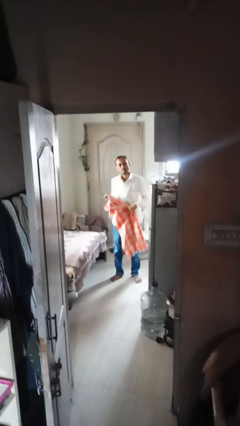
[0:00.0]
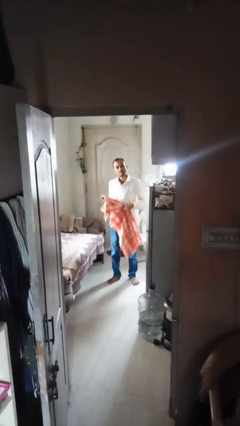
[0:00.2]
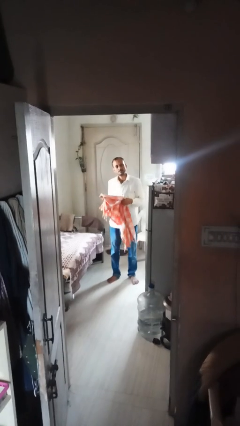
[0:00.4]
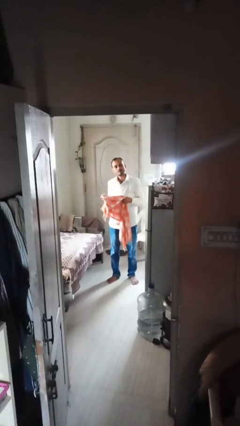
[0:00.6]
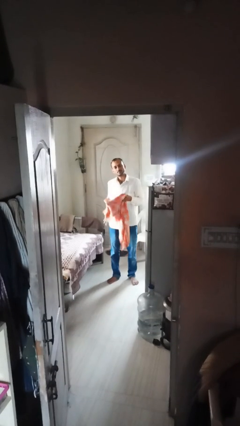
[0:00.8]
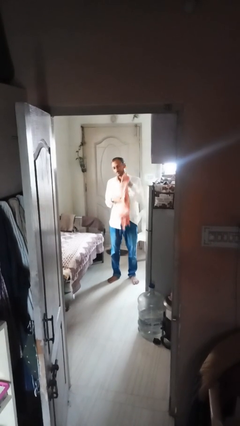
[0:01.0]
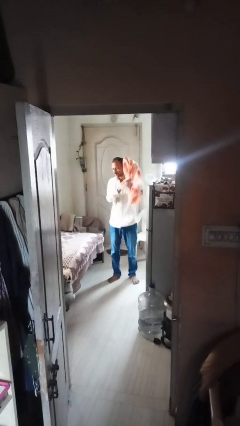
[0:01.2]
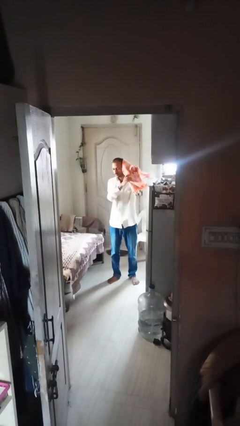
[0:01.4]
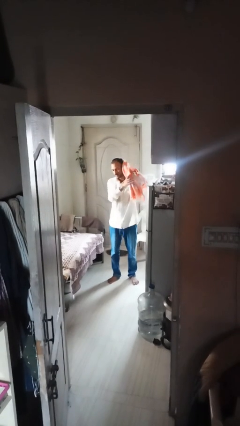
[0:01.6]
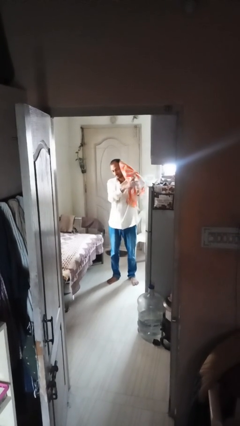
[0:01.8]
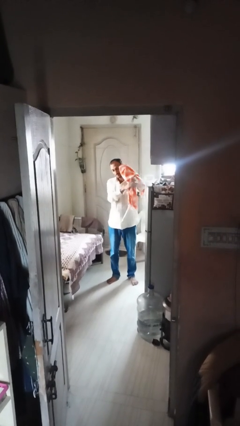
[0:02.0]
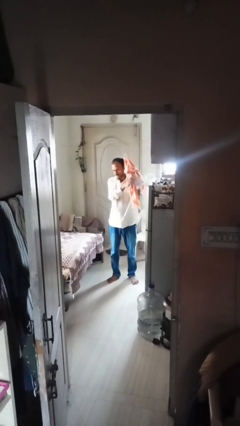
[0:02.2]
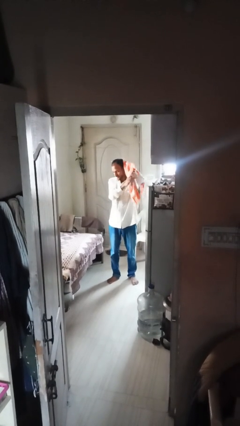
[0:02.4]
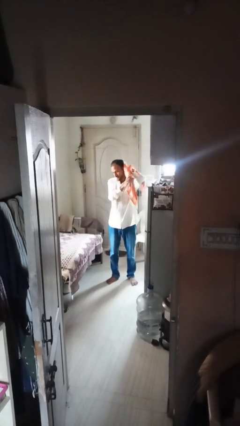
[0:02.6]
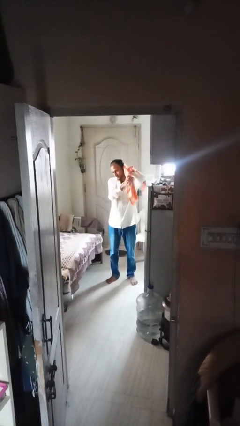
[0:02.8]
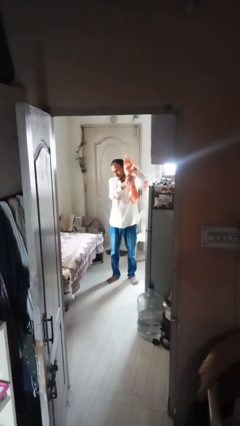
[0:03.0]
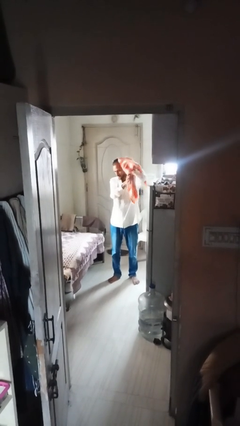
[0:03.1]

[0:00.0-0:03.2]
person dries hair with towel

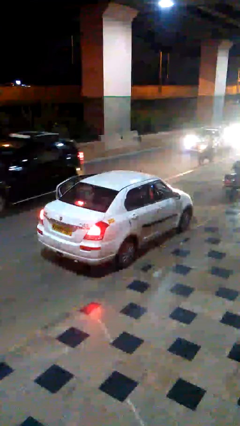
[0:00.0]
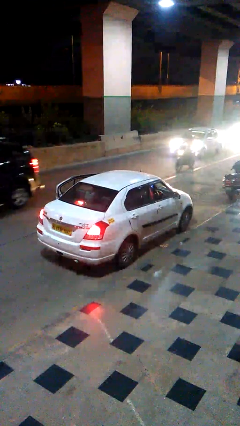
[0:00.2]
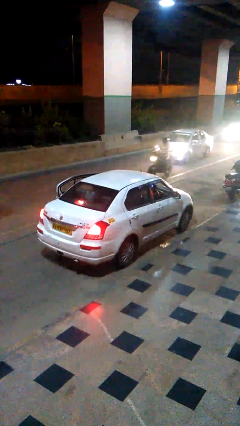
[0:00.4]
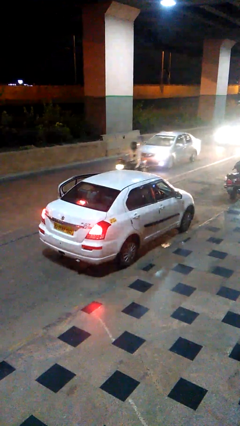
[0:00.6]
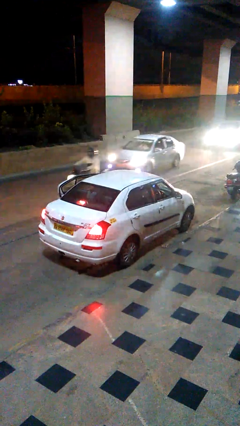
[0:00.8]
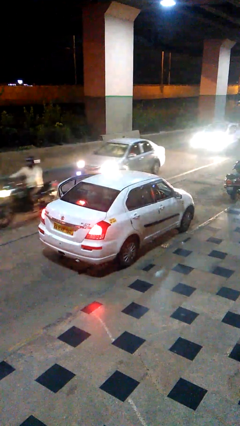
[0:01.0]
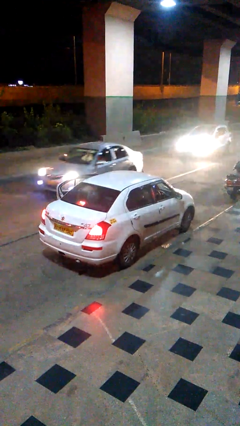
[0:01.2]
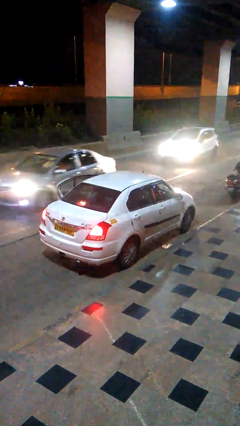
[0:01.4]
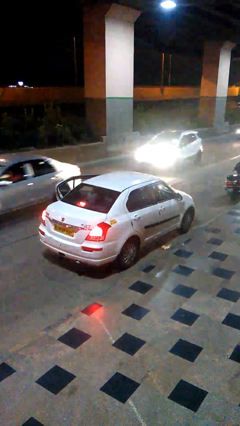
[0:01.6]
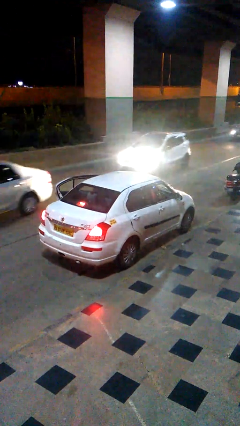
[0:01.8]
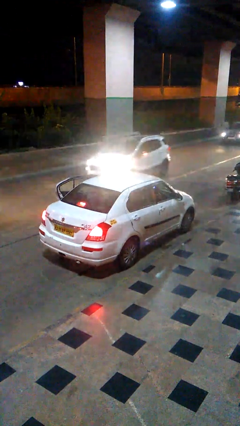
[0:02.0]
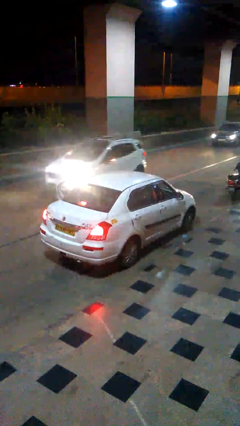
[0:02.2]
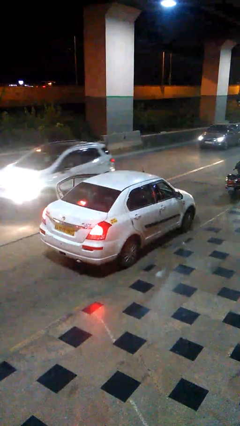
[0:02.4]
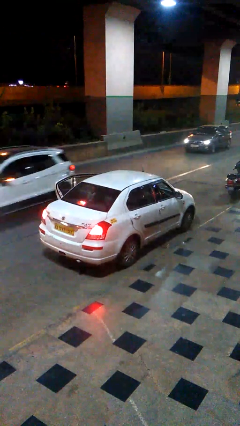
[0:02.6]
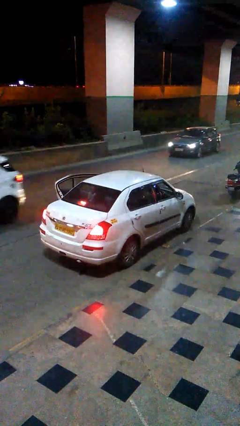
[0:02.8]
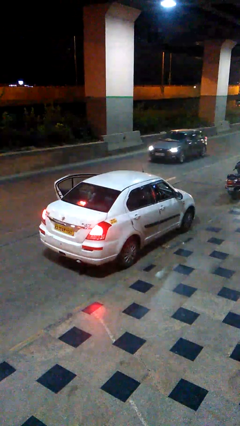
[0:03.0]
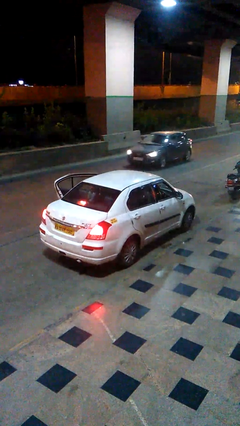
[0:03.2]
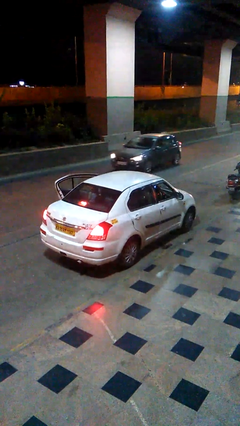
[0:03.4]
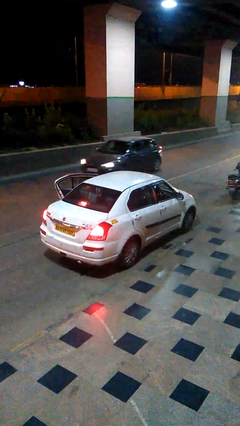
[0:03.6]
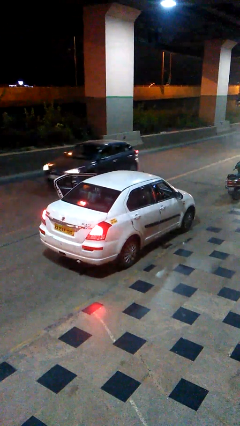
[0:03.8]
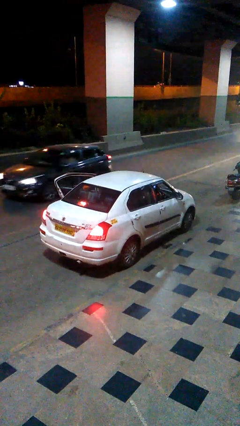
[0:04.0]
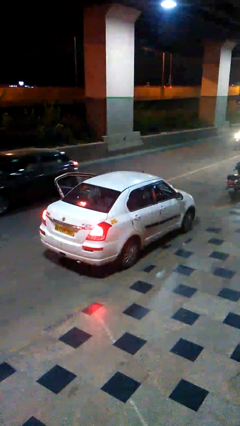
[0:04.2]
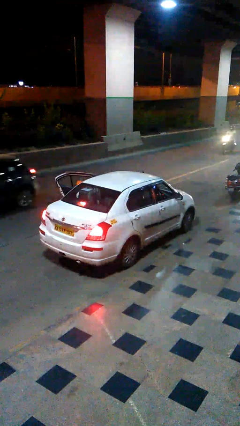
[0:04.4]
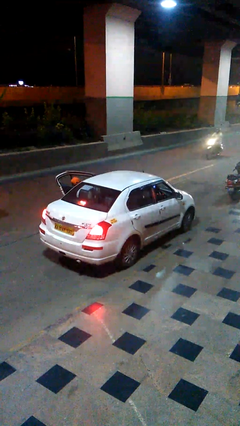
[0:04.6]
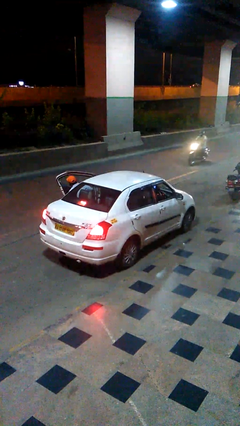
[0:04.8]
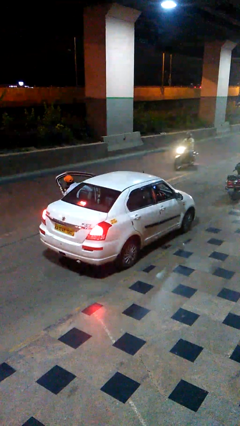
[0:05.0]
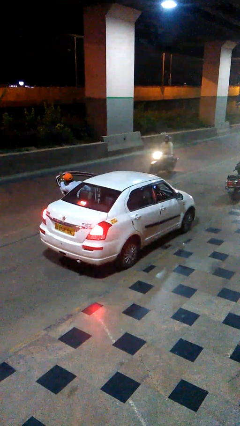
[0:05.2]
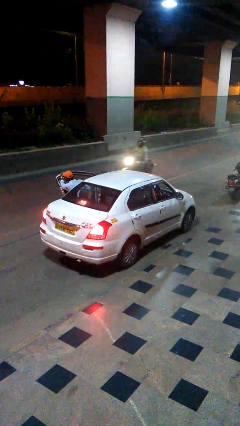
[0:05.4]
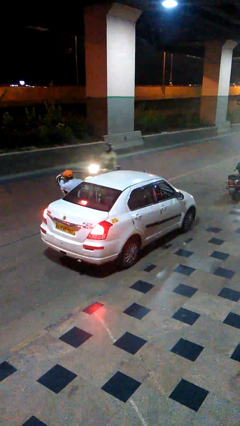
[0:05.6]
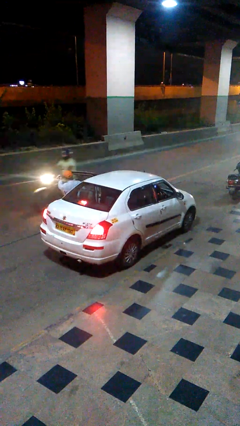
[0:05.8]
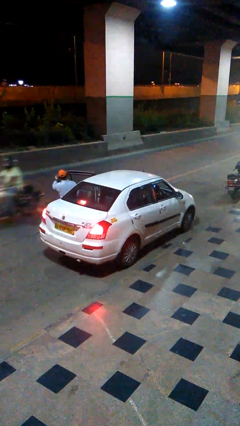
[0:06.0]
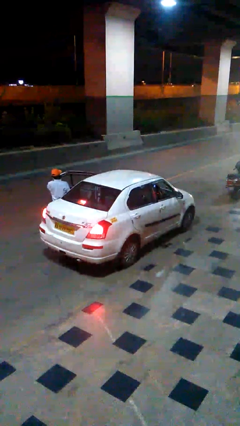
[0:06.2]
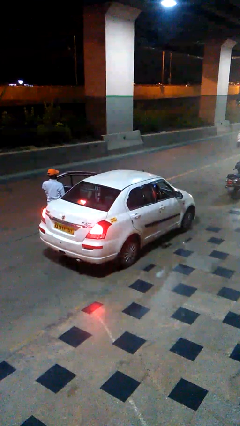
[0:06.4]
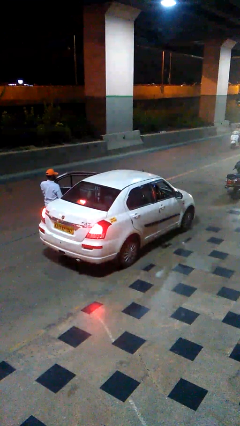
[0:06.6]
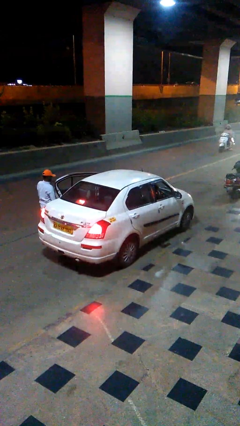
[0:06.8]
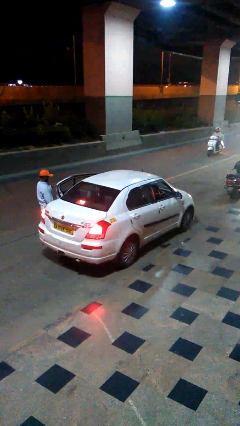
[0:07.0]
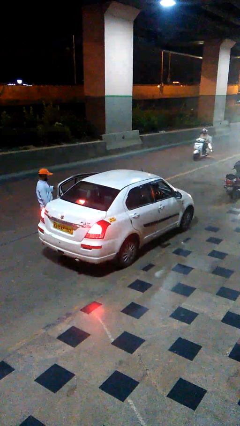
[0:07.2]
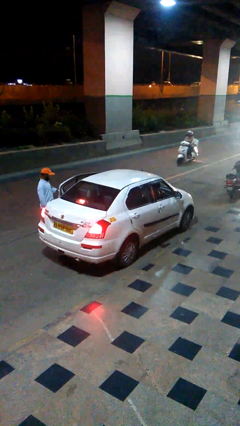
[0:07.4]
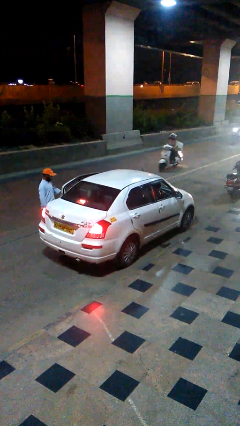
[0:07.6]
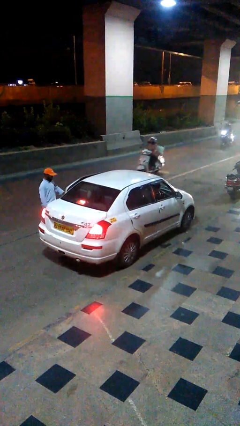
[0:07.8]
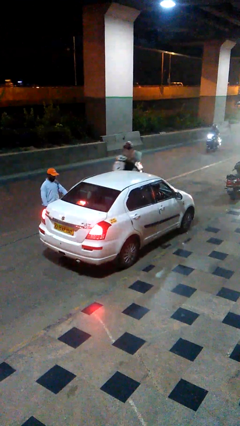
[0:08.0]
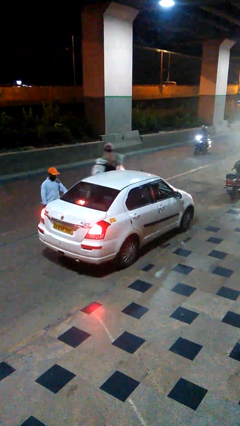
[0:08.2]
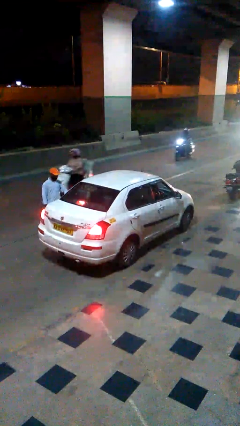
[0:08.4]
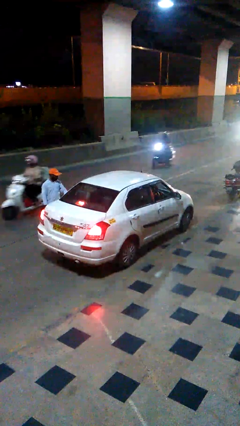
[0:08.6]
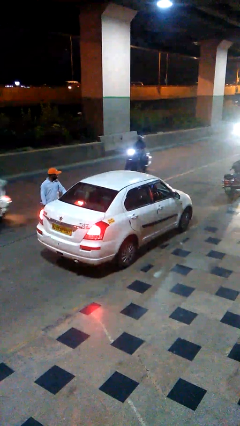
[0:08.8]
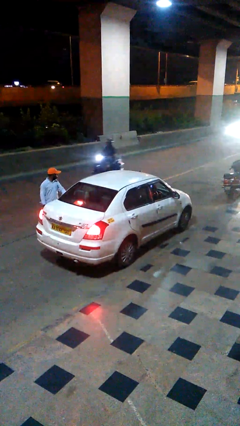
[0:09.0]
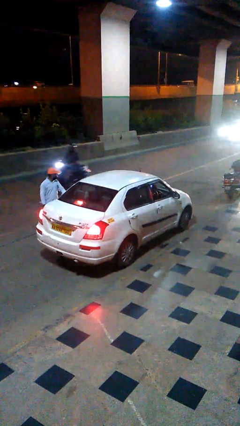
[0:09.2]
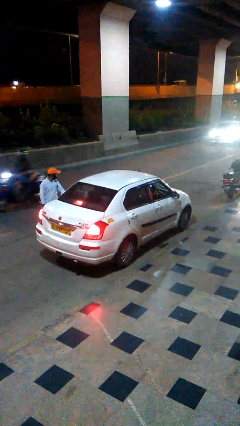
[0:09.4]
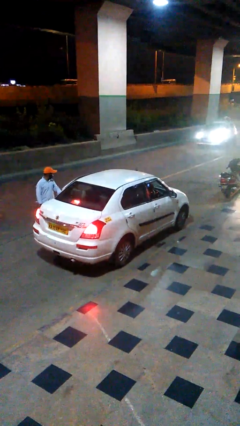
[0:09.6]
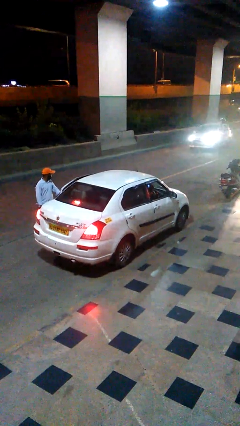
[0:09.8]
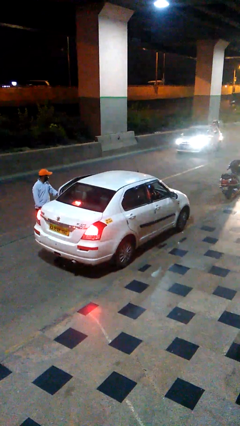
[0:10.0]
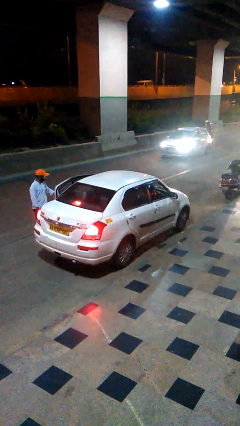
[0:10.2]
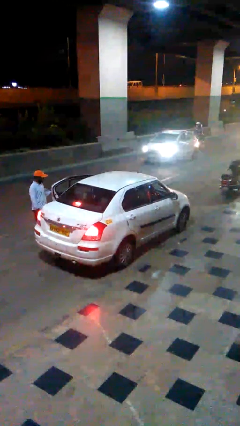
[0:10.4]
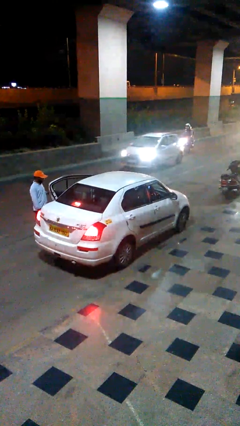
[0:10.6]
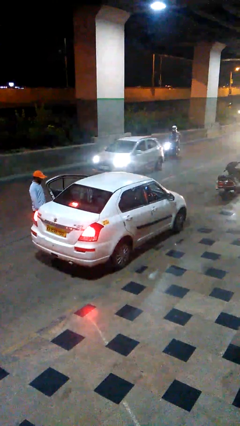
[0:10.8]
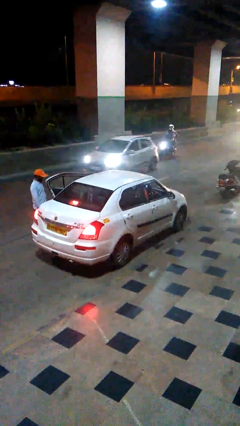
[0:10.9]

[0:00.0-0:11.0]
car drops off person

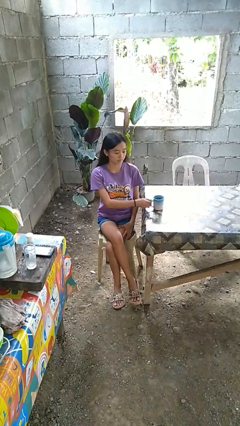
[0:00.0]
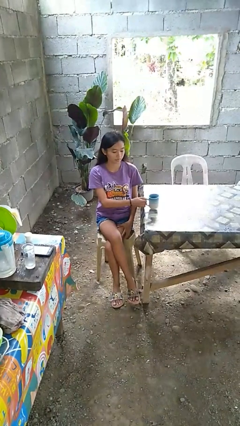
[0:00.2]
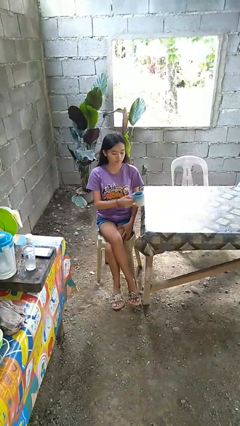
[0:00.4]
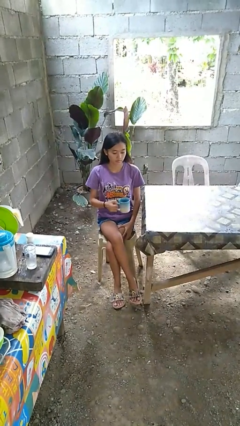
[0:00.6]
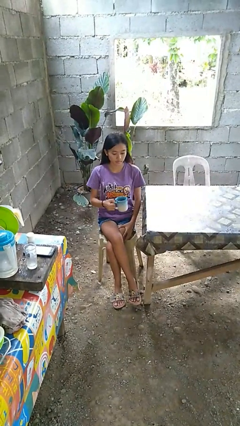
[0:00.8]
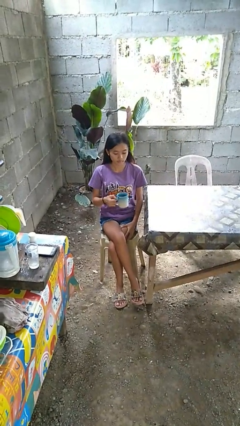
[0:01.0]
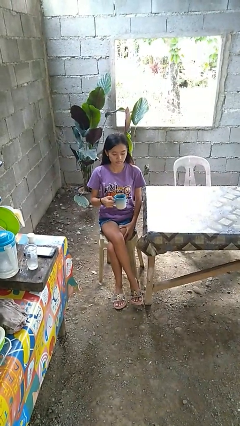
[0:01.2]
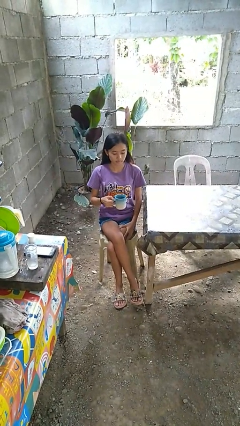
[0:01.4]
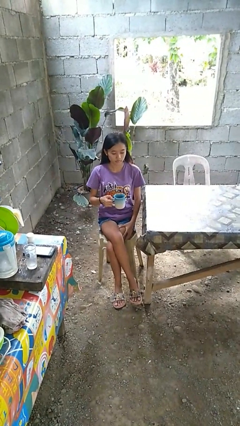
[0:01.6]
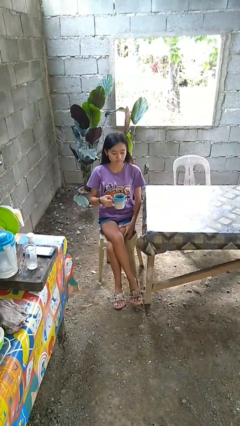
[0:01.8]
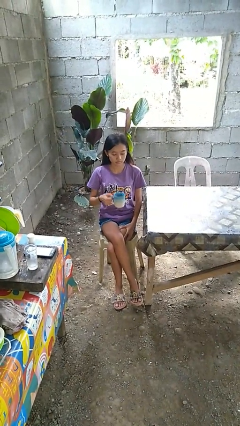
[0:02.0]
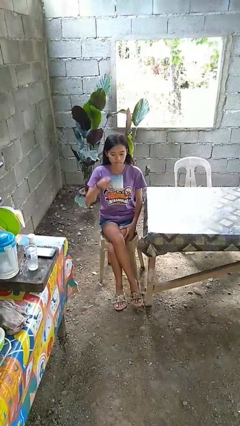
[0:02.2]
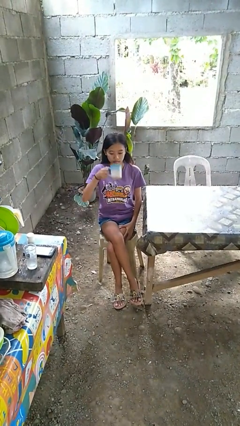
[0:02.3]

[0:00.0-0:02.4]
person picks up object from table

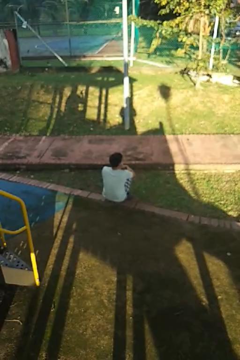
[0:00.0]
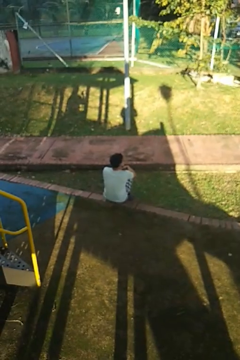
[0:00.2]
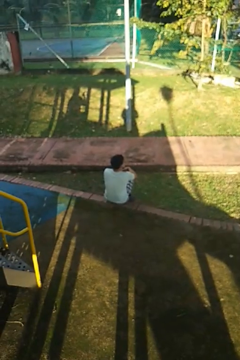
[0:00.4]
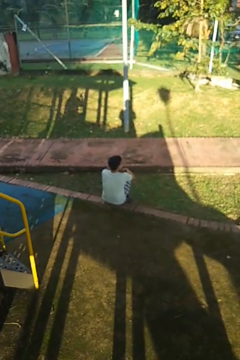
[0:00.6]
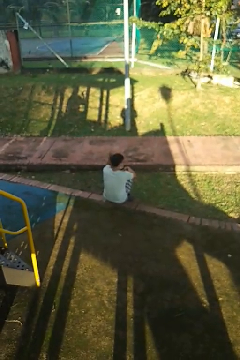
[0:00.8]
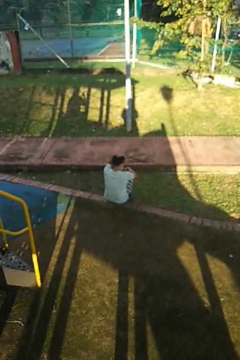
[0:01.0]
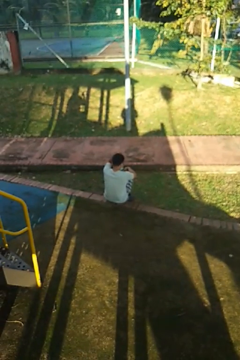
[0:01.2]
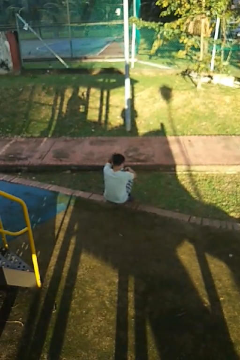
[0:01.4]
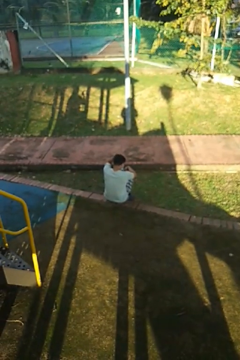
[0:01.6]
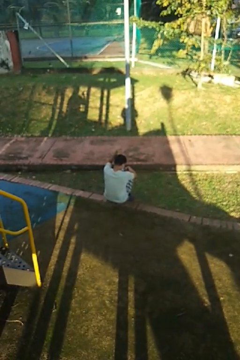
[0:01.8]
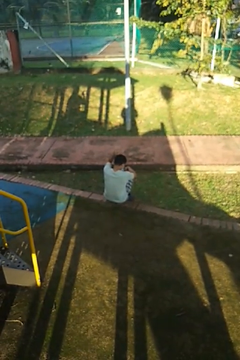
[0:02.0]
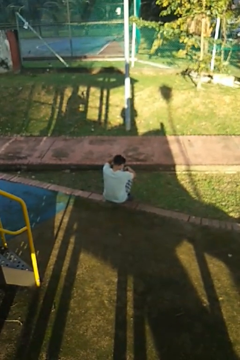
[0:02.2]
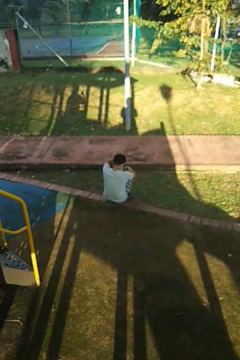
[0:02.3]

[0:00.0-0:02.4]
person pats head
